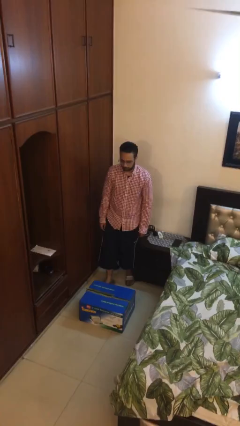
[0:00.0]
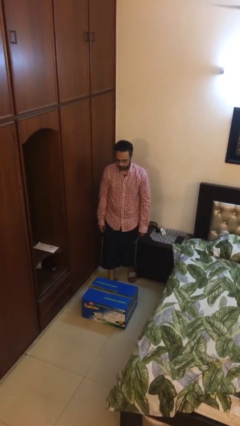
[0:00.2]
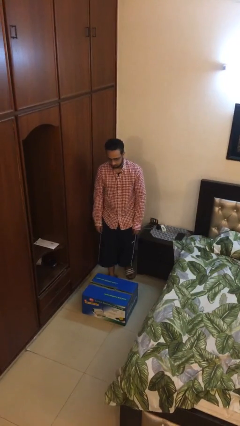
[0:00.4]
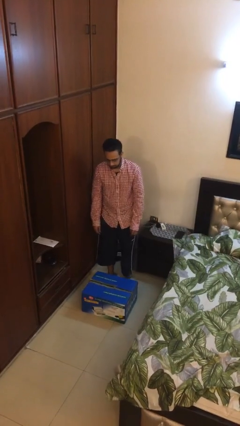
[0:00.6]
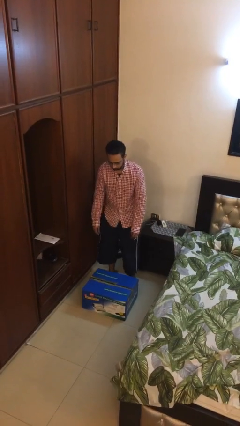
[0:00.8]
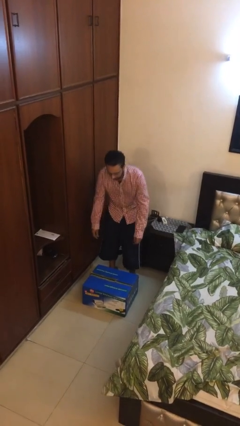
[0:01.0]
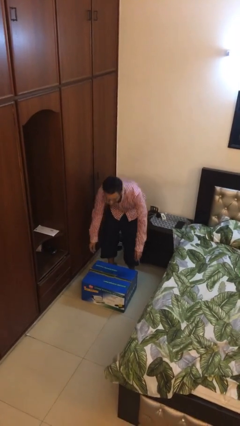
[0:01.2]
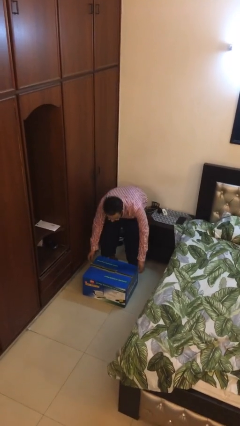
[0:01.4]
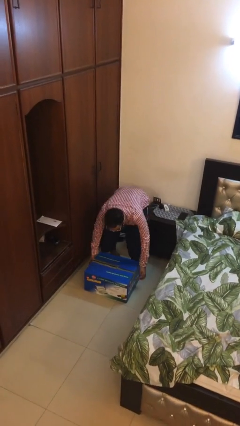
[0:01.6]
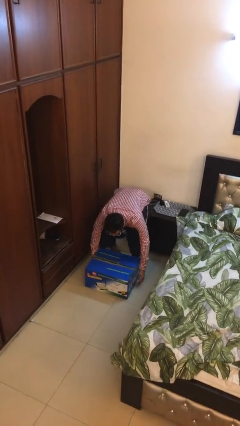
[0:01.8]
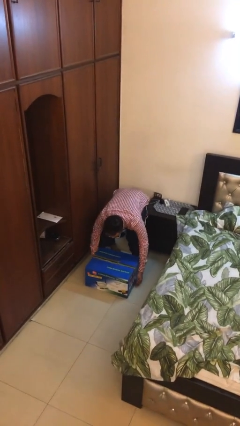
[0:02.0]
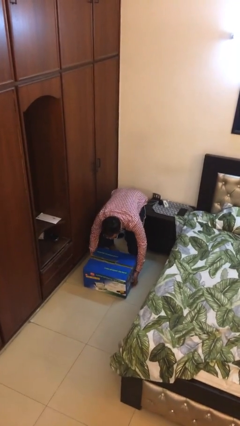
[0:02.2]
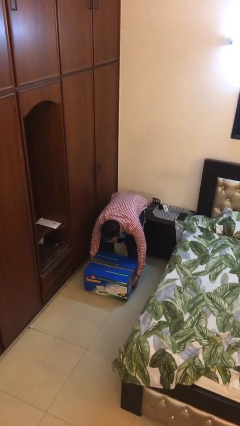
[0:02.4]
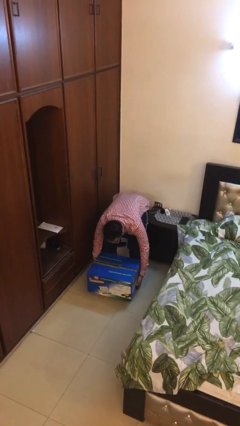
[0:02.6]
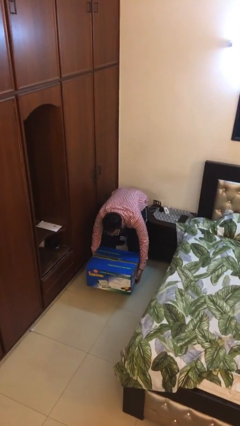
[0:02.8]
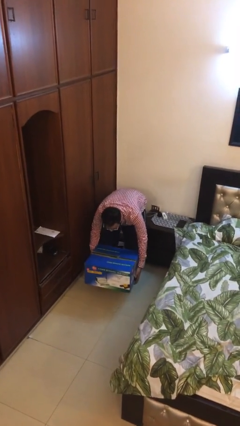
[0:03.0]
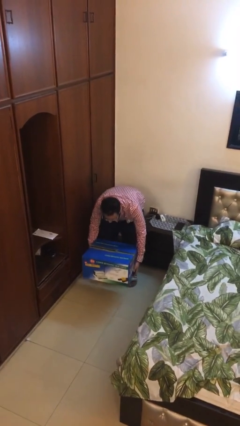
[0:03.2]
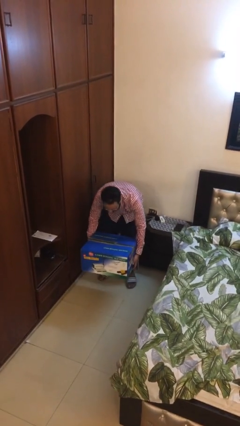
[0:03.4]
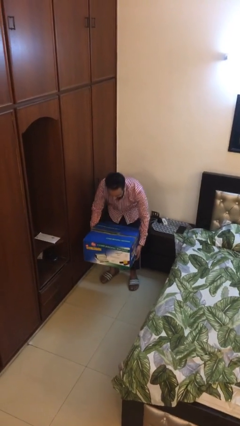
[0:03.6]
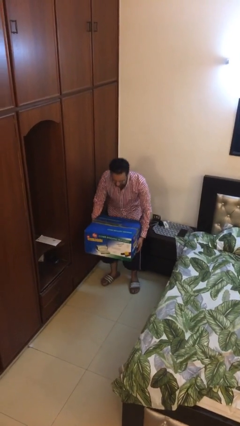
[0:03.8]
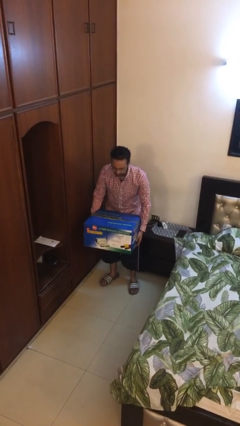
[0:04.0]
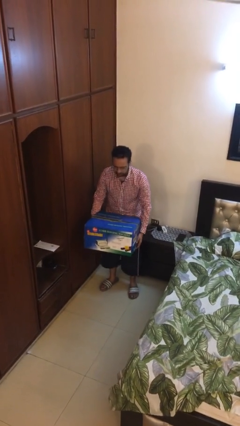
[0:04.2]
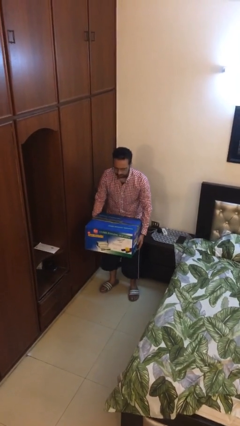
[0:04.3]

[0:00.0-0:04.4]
person picks up object from floor

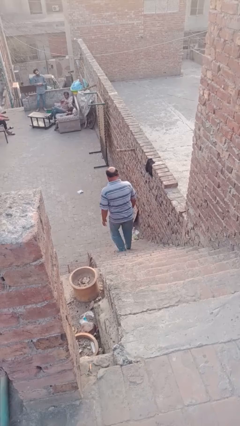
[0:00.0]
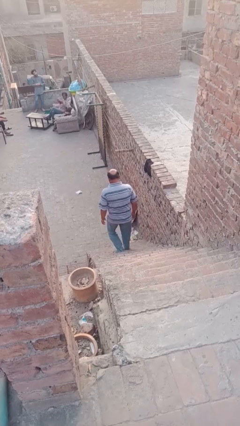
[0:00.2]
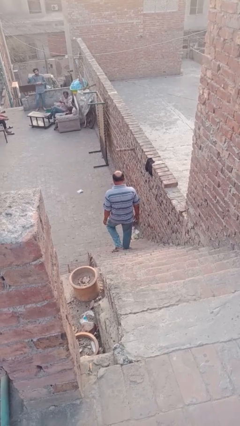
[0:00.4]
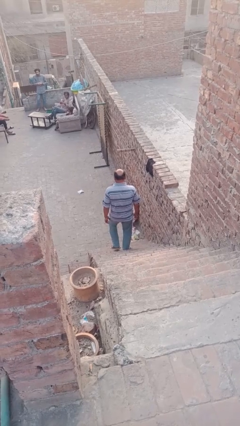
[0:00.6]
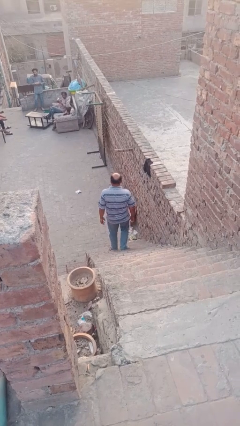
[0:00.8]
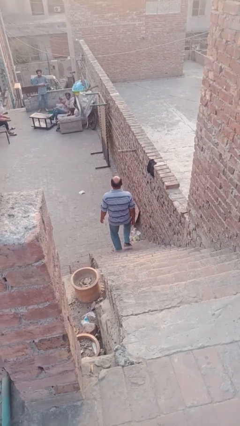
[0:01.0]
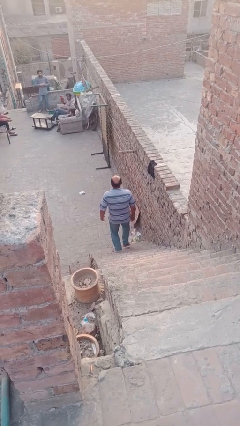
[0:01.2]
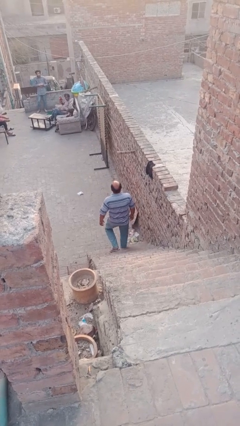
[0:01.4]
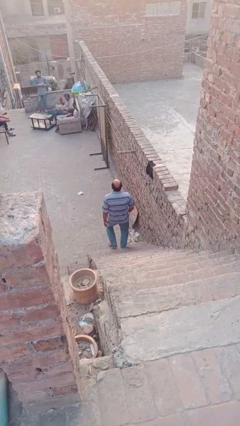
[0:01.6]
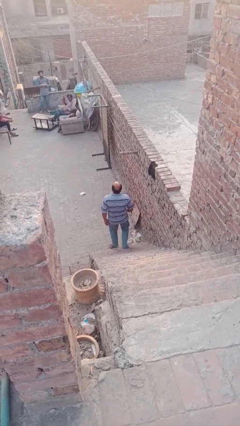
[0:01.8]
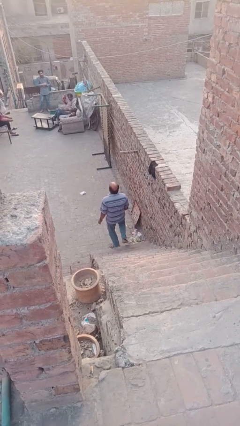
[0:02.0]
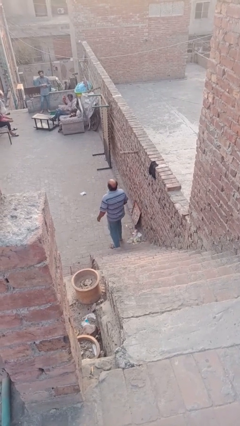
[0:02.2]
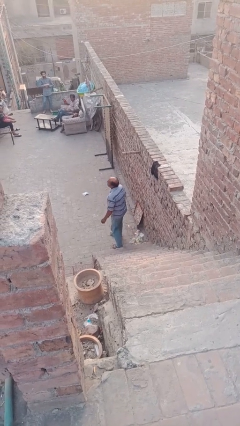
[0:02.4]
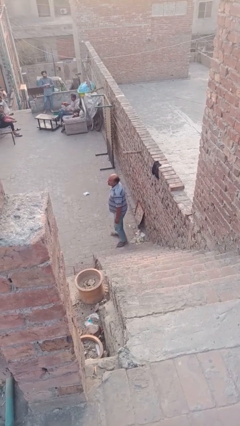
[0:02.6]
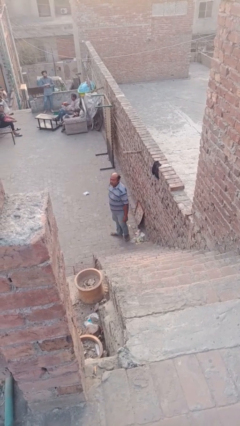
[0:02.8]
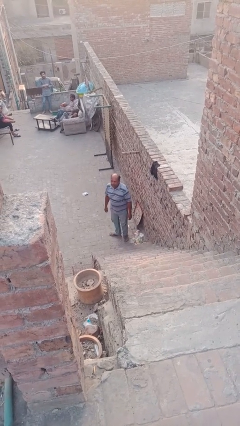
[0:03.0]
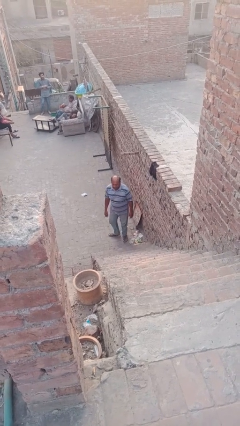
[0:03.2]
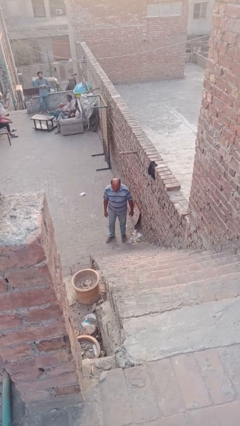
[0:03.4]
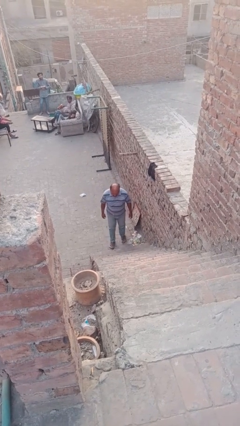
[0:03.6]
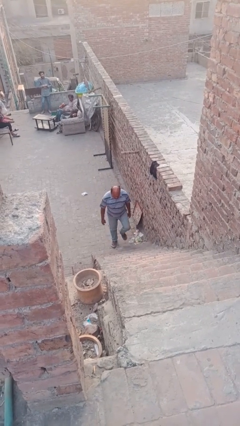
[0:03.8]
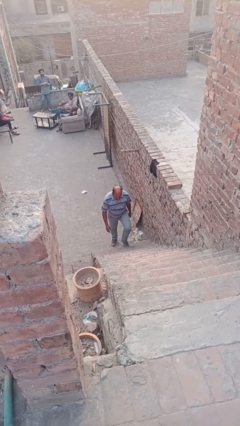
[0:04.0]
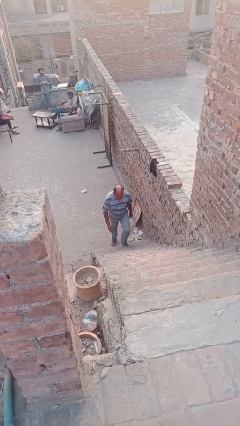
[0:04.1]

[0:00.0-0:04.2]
person climbs down stairs

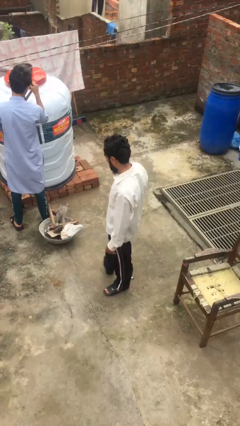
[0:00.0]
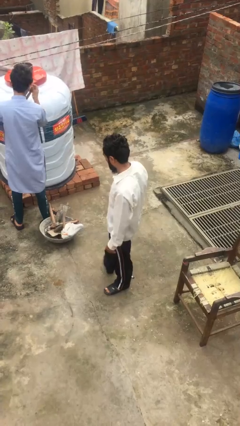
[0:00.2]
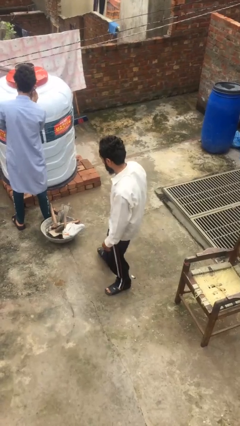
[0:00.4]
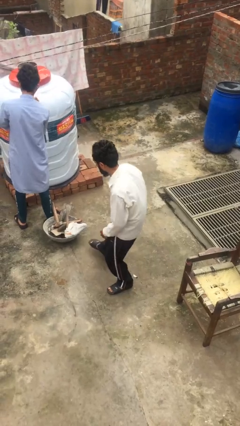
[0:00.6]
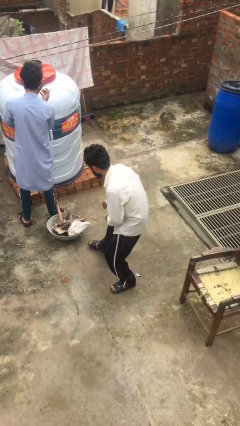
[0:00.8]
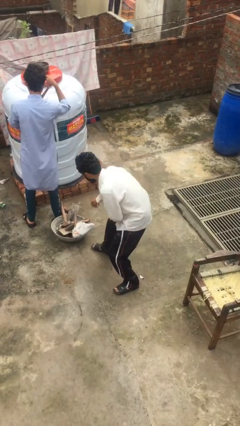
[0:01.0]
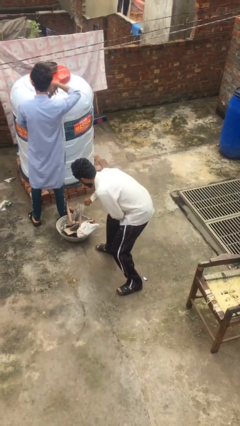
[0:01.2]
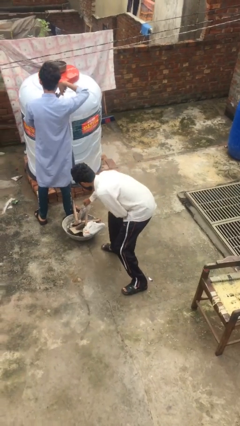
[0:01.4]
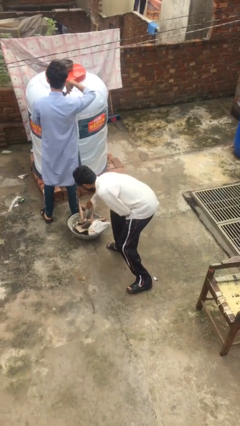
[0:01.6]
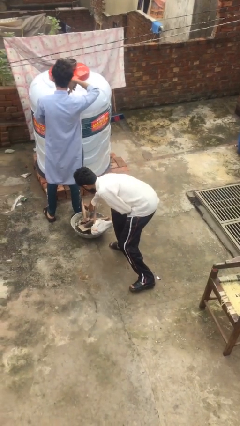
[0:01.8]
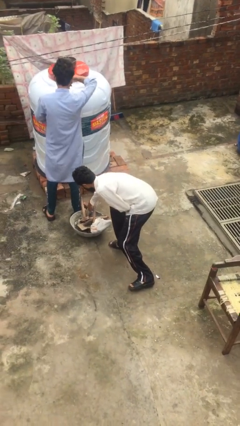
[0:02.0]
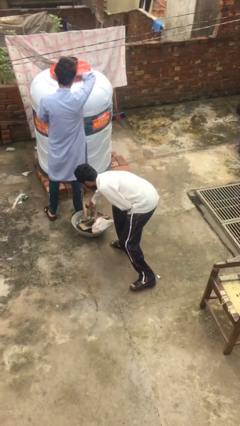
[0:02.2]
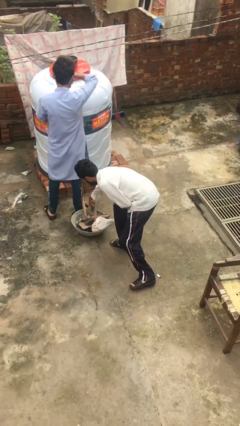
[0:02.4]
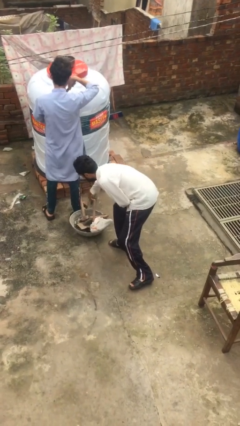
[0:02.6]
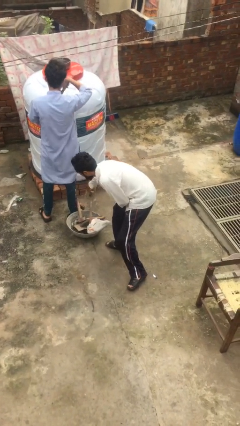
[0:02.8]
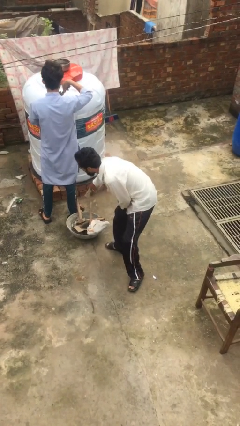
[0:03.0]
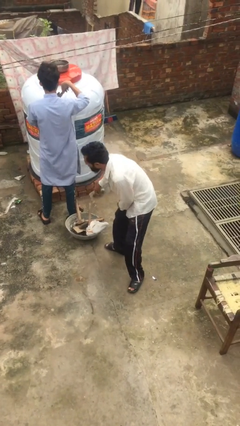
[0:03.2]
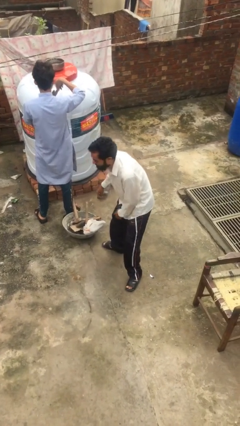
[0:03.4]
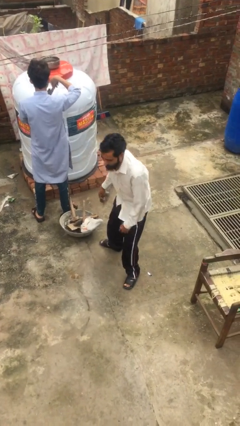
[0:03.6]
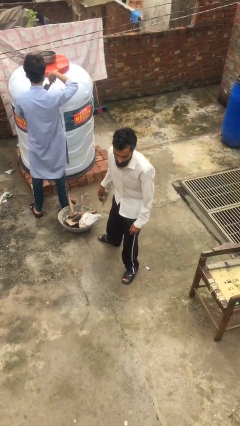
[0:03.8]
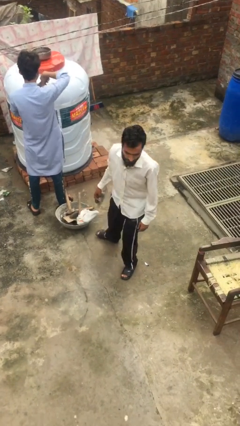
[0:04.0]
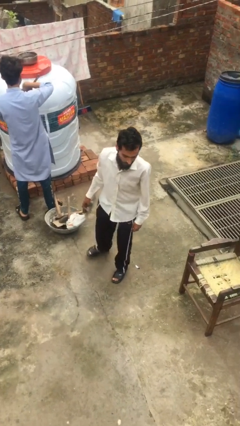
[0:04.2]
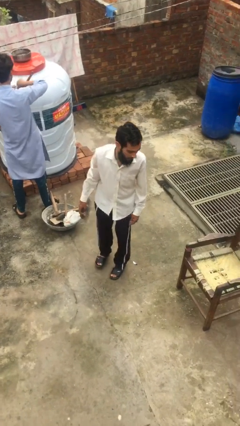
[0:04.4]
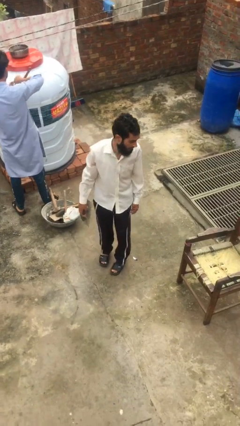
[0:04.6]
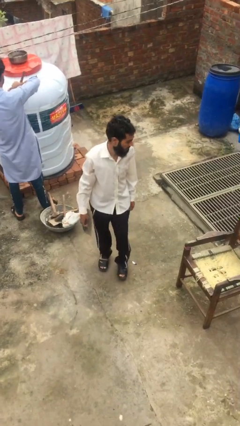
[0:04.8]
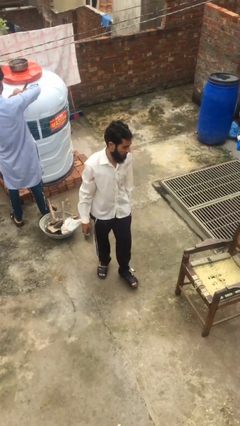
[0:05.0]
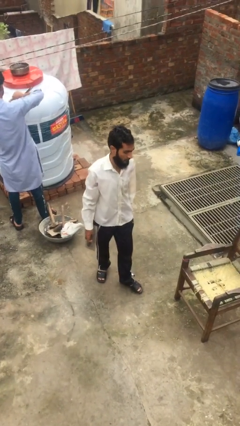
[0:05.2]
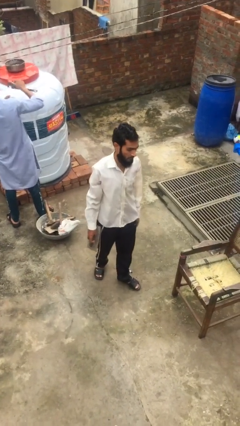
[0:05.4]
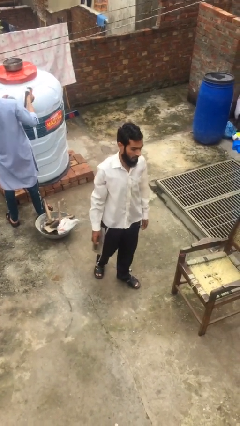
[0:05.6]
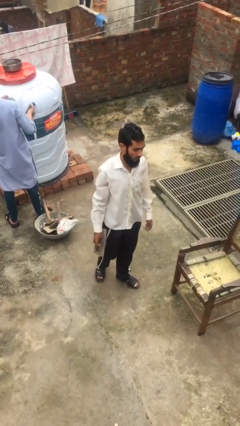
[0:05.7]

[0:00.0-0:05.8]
person steals object from person

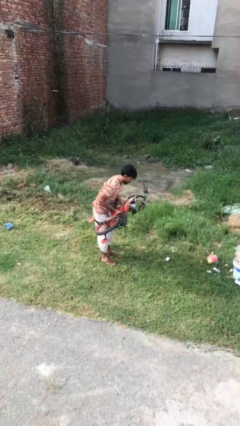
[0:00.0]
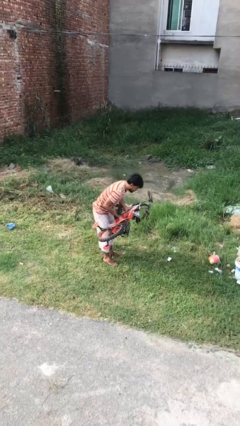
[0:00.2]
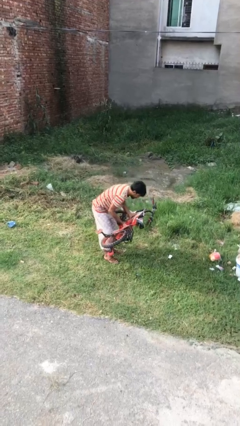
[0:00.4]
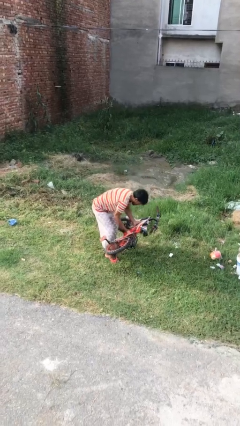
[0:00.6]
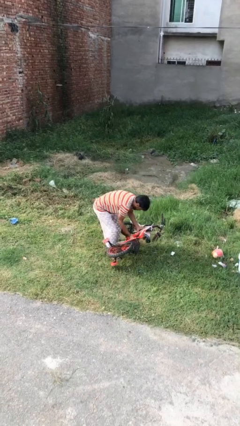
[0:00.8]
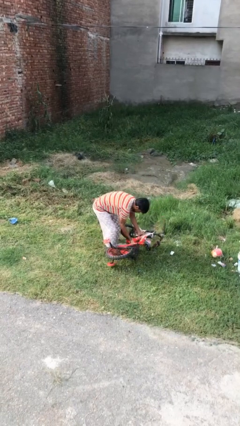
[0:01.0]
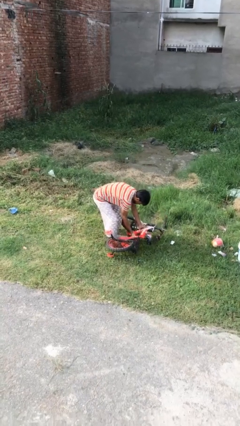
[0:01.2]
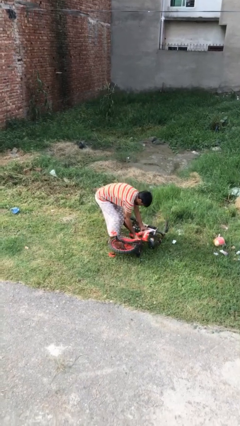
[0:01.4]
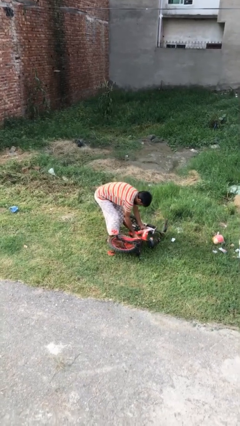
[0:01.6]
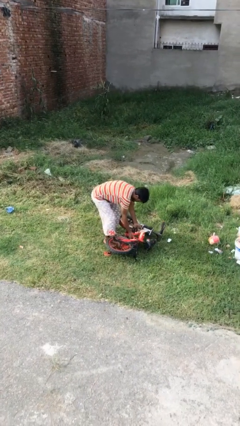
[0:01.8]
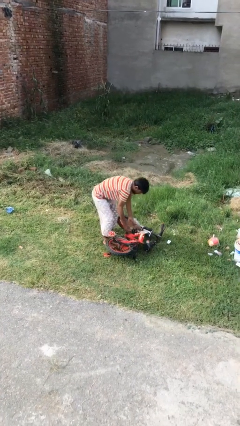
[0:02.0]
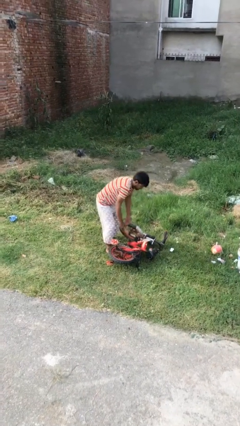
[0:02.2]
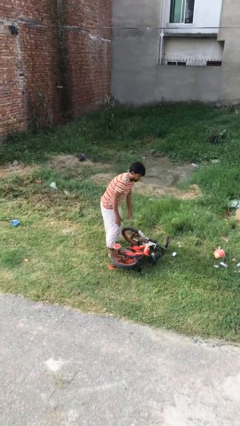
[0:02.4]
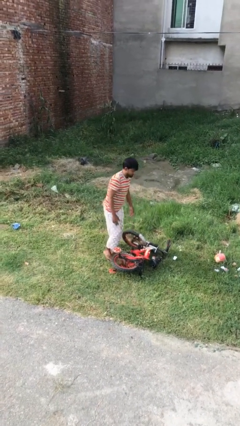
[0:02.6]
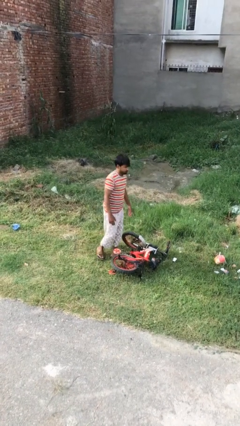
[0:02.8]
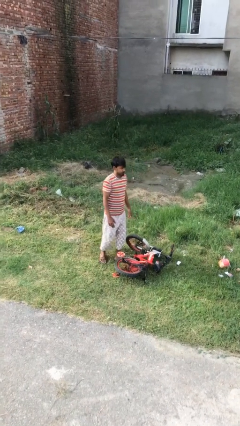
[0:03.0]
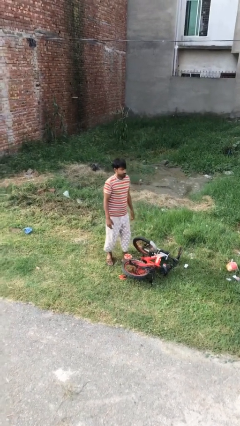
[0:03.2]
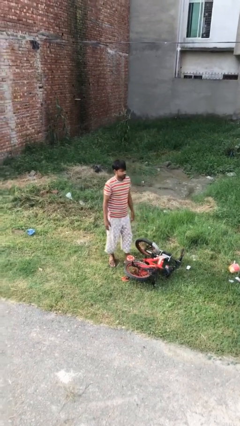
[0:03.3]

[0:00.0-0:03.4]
person puts down object on floor
